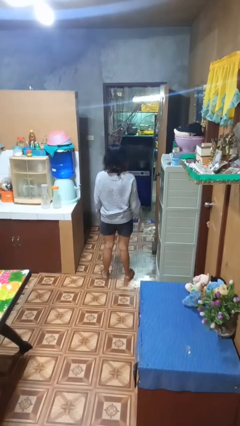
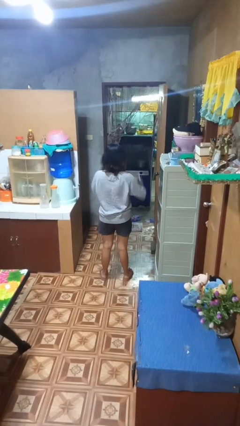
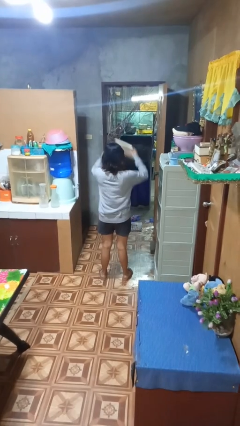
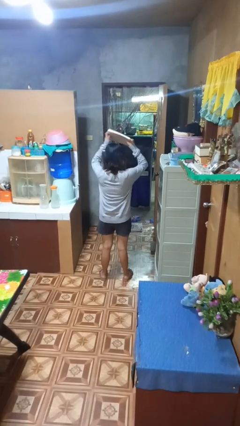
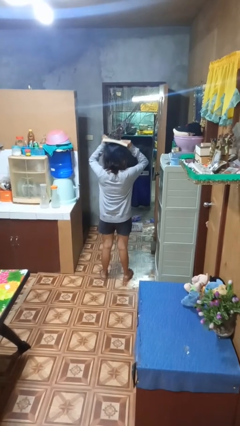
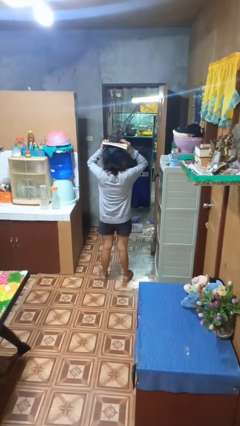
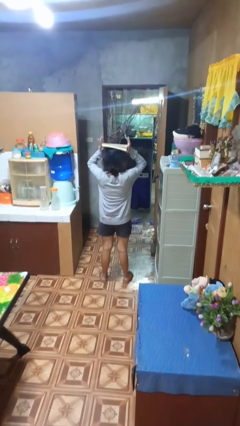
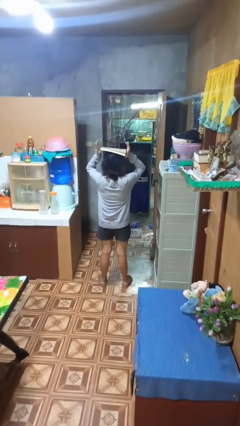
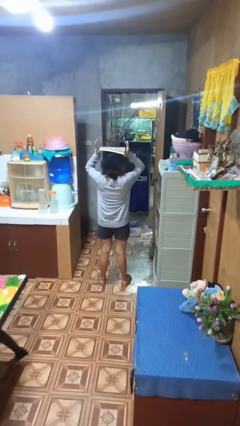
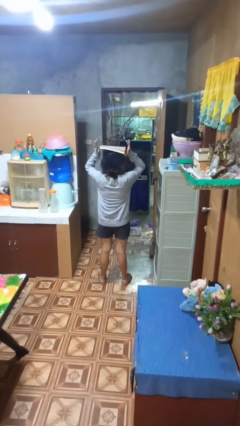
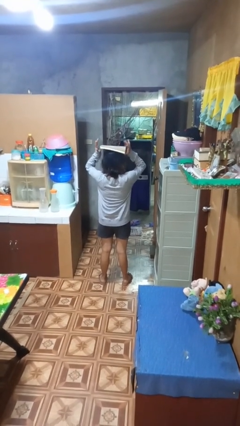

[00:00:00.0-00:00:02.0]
person holds object above head

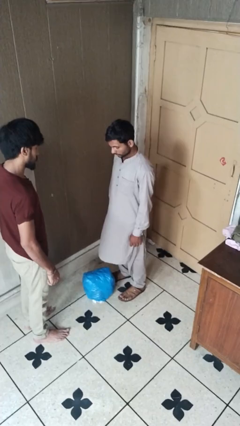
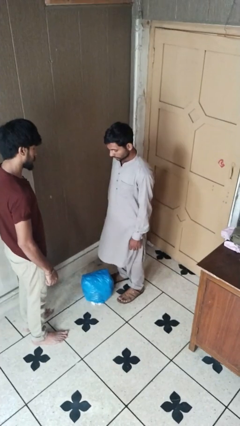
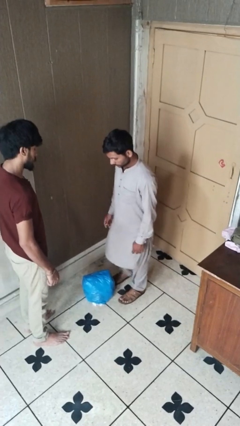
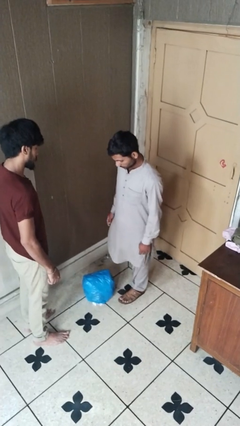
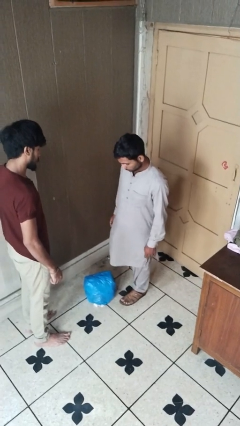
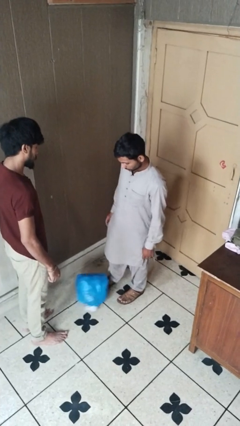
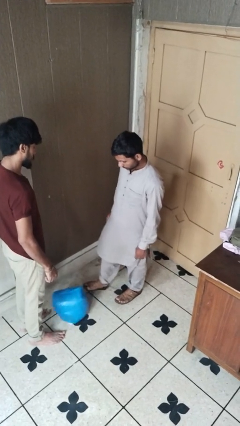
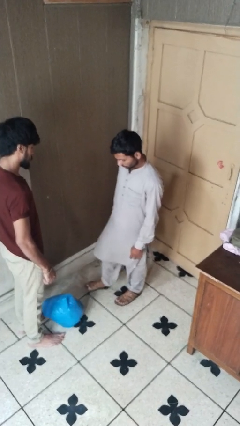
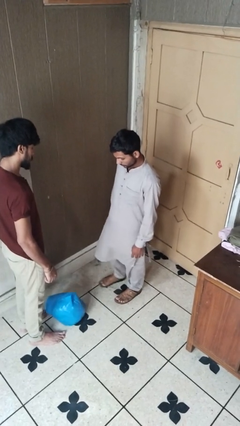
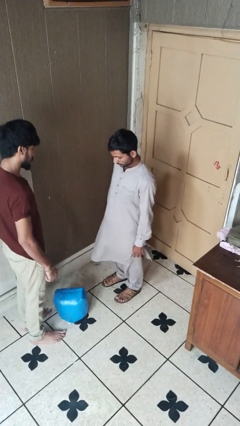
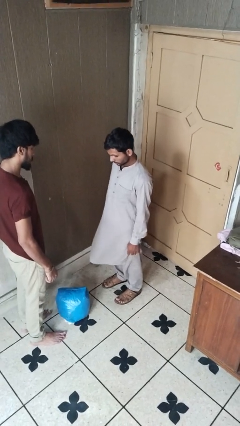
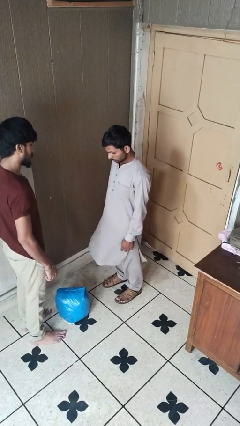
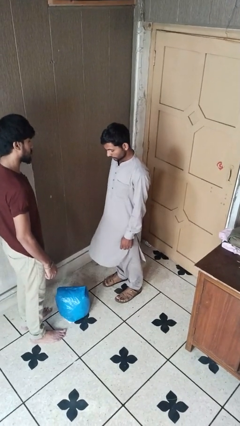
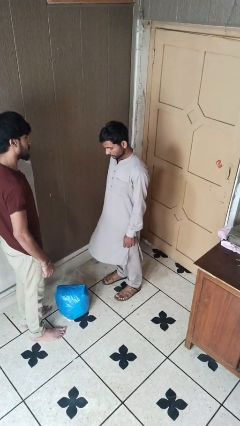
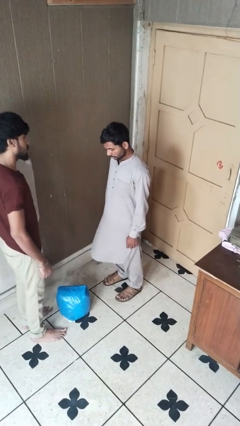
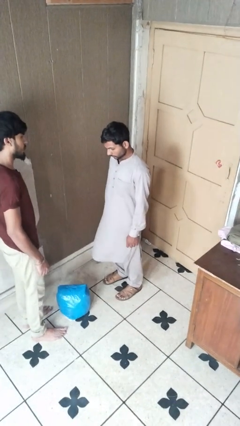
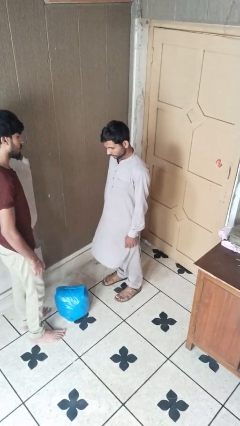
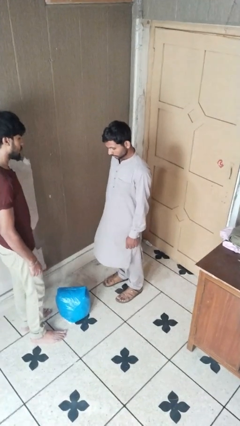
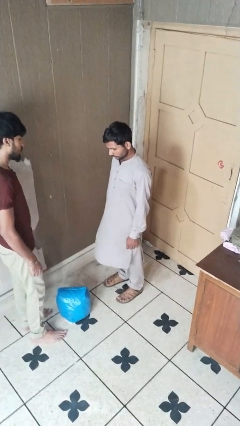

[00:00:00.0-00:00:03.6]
person kicks object to person

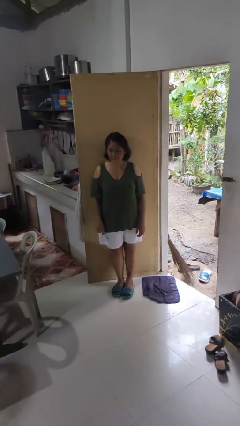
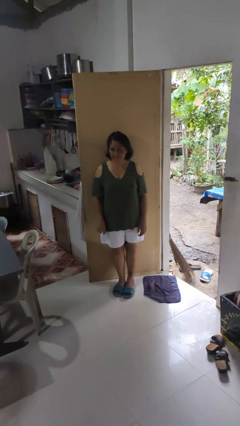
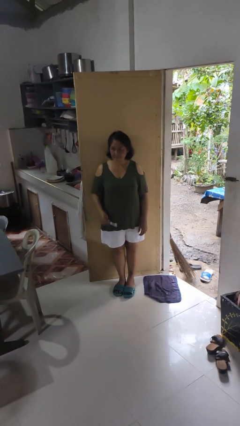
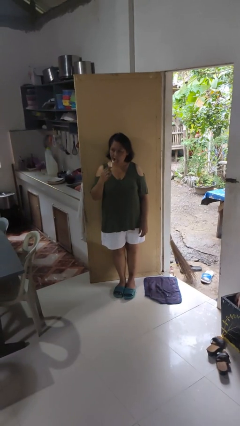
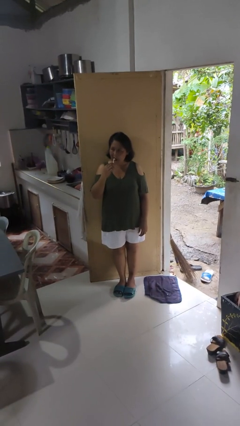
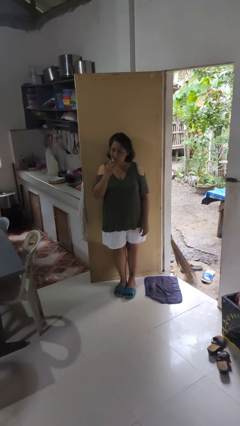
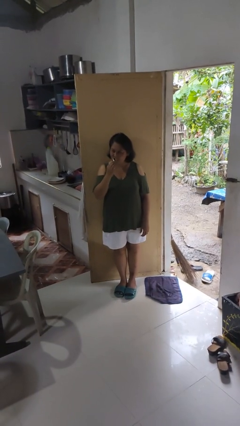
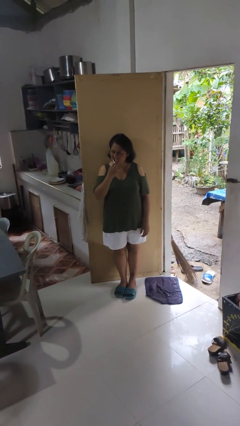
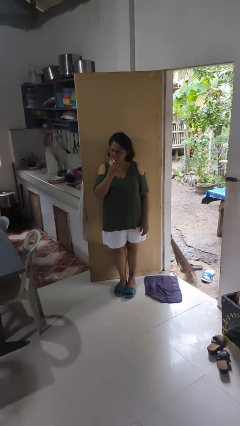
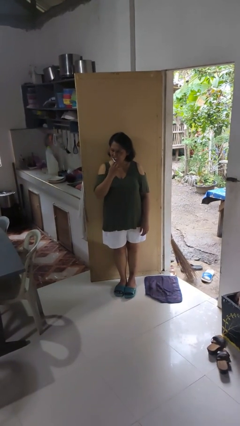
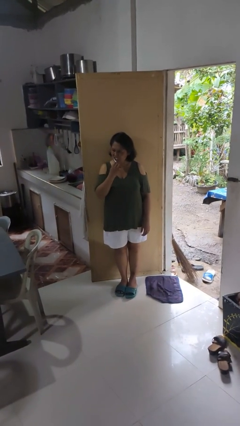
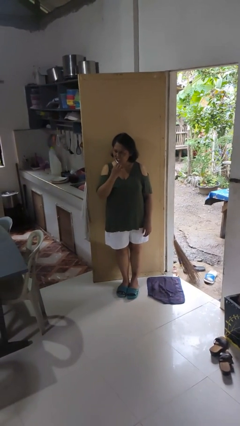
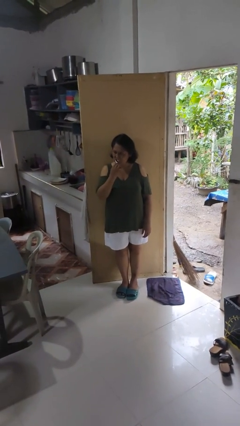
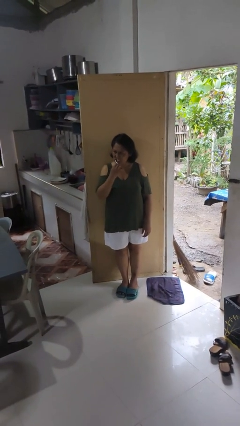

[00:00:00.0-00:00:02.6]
person brushes teeth

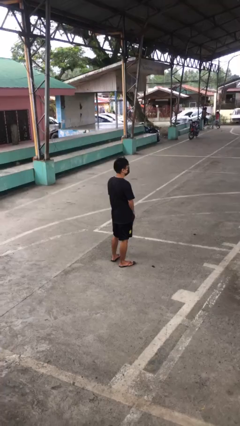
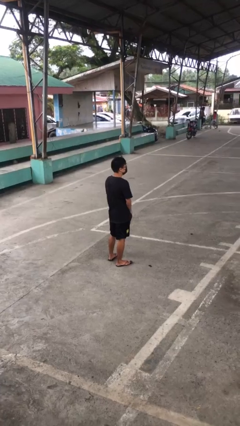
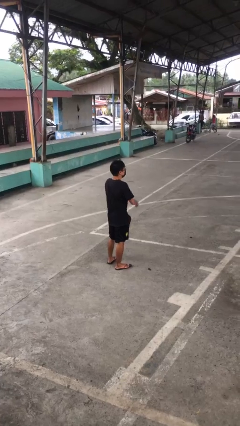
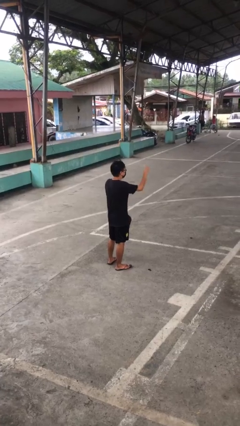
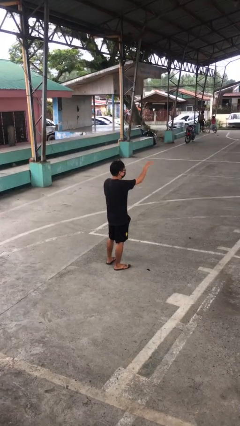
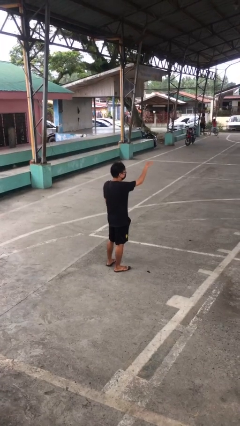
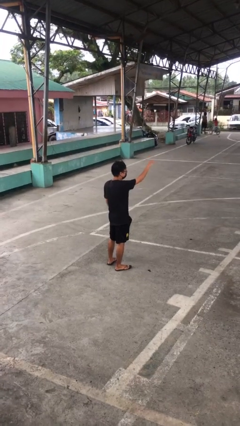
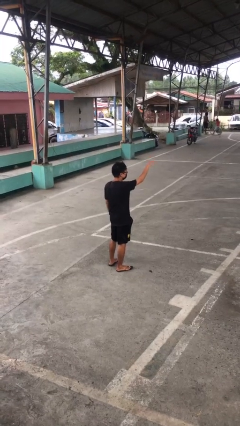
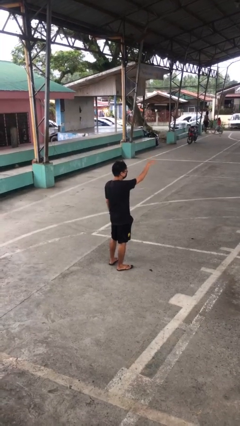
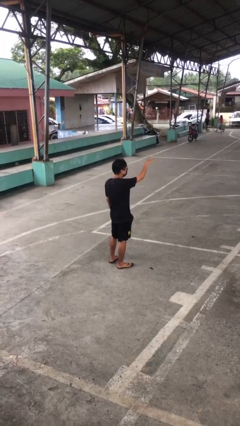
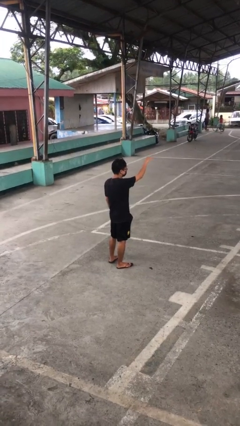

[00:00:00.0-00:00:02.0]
person gestures come here

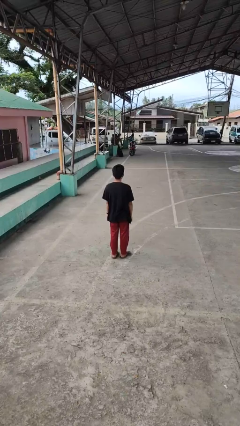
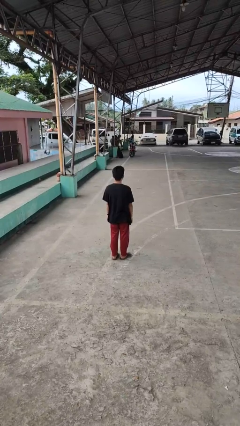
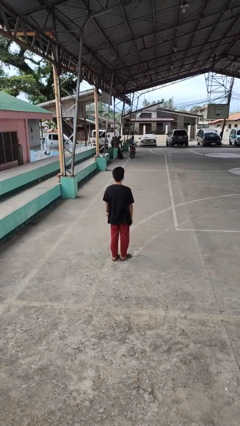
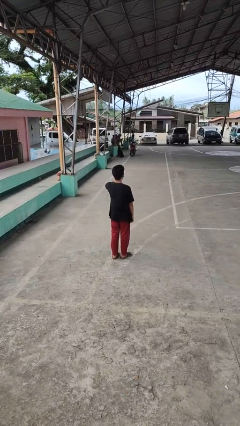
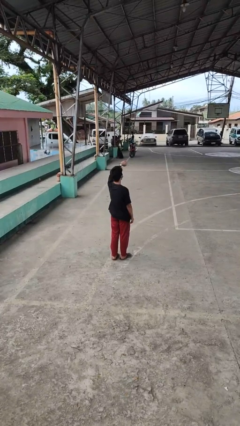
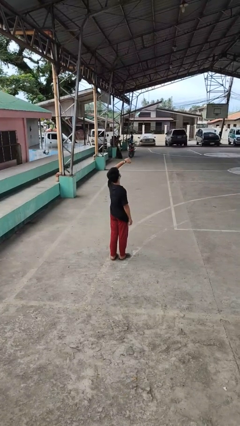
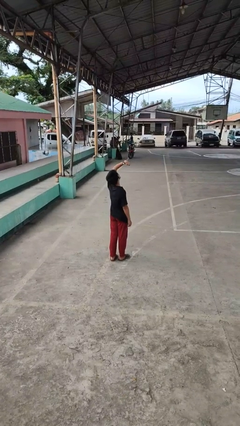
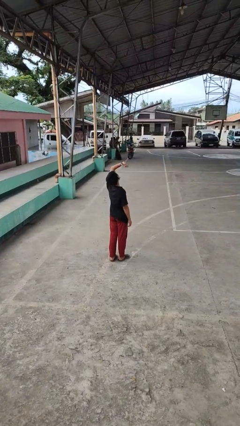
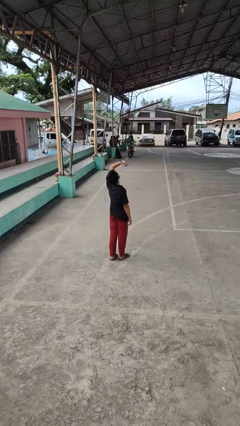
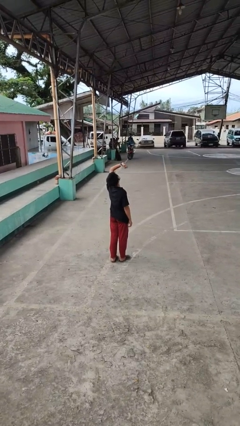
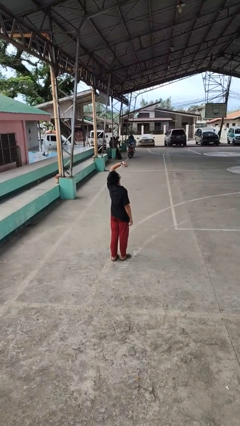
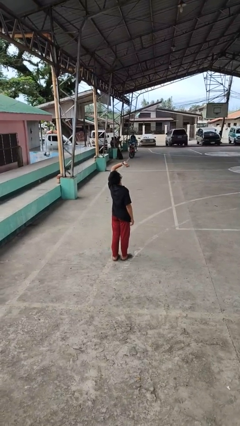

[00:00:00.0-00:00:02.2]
person looks at wristwatch

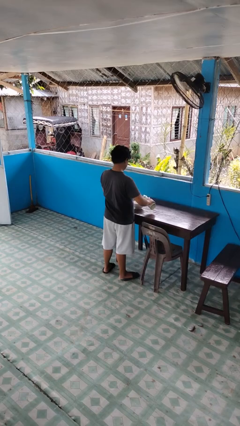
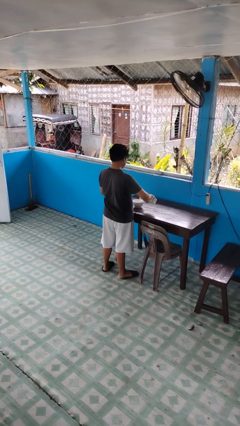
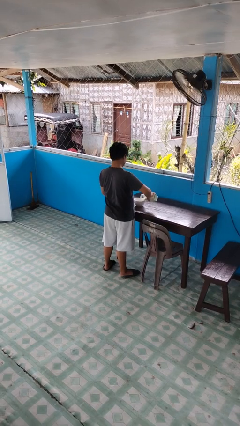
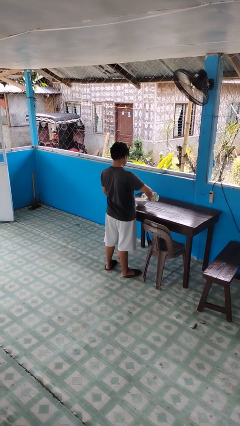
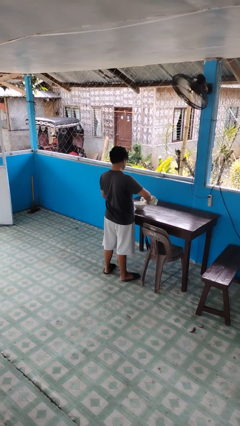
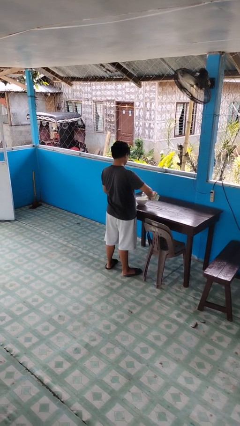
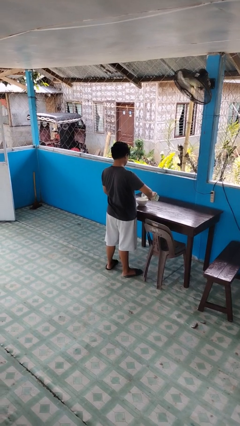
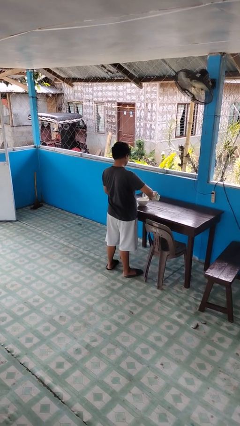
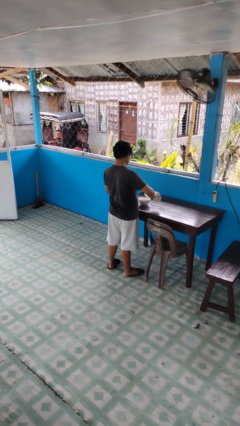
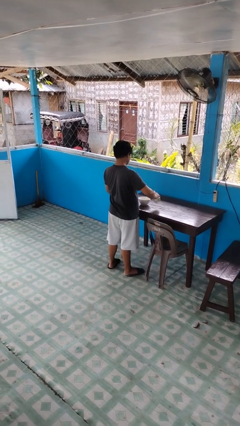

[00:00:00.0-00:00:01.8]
person pours into bowl

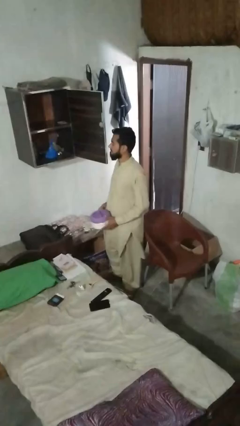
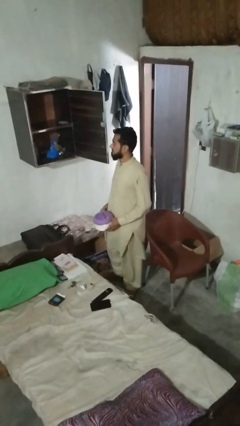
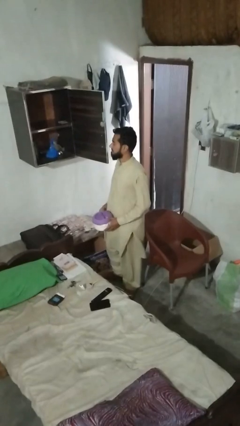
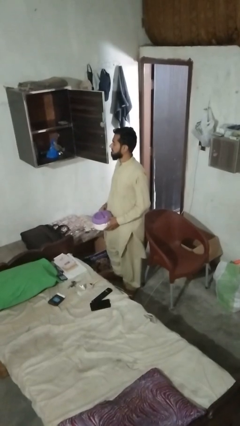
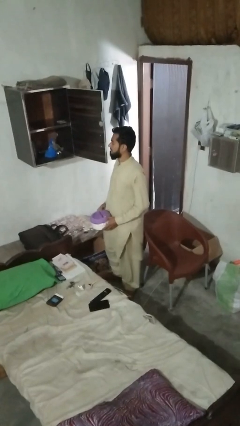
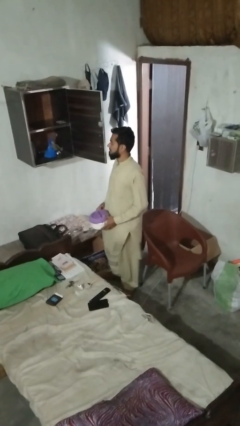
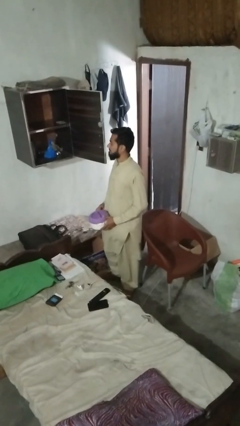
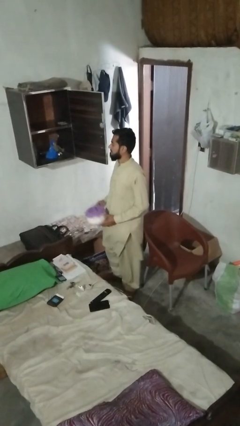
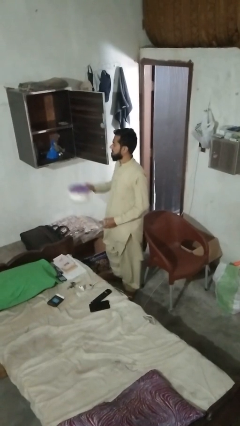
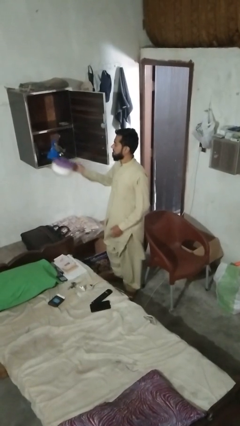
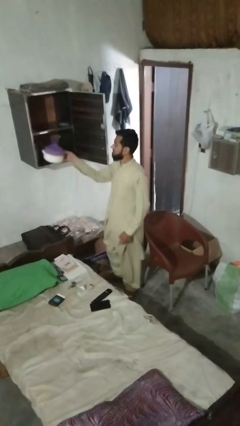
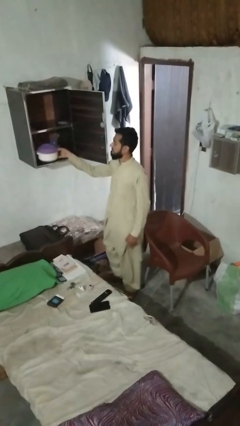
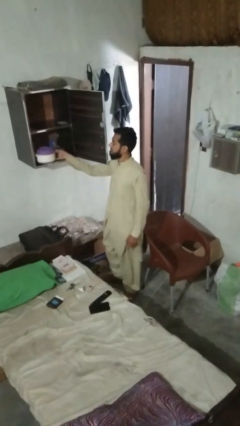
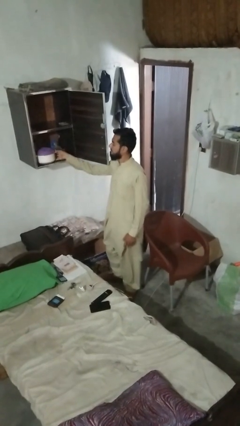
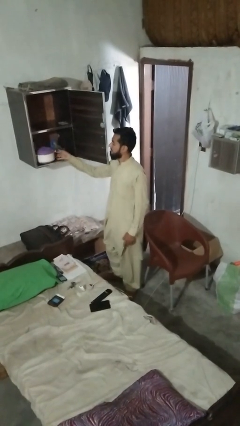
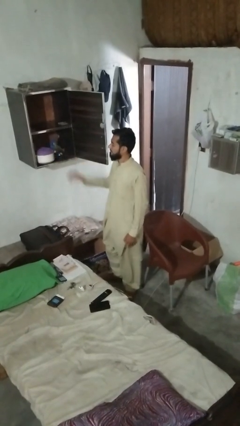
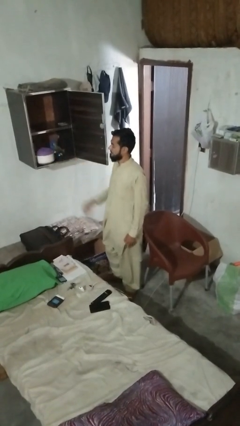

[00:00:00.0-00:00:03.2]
person loads groceries into cabinet
